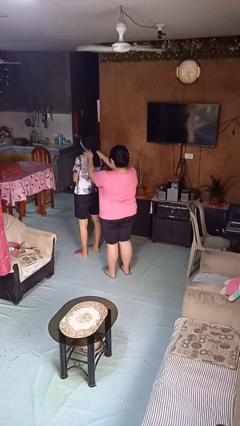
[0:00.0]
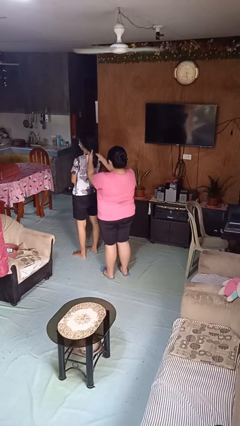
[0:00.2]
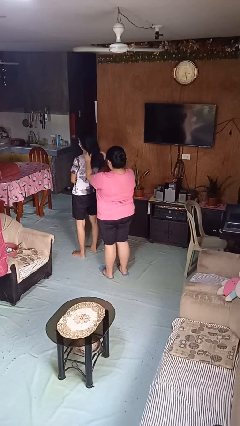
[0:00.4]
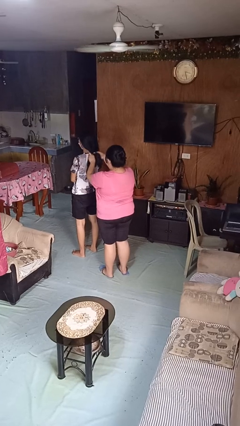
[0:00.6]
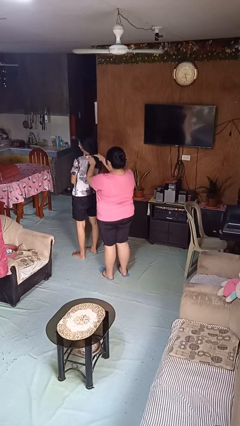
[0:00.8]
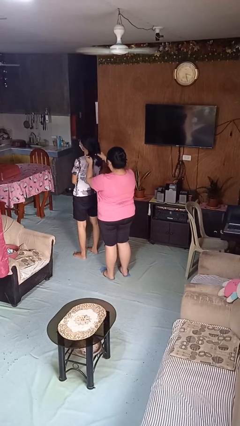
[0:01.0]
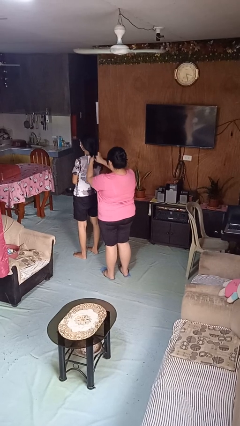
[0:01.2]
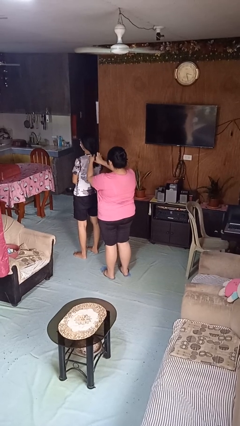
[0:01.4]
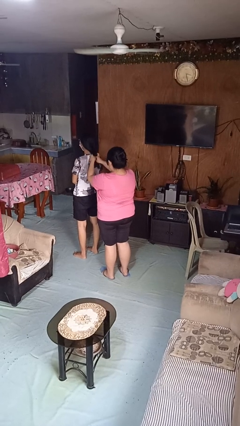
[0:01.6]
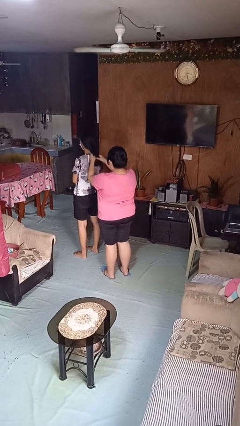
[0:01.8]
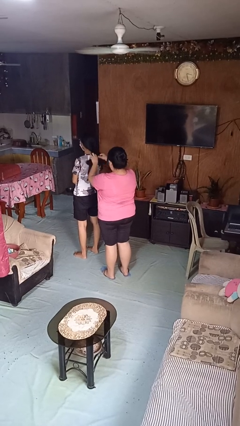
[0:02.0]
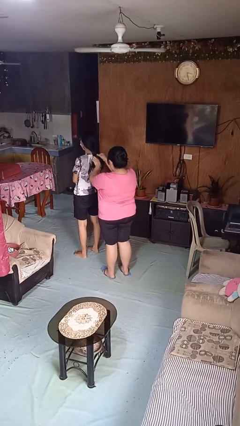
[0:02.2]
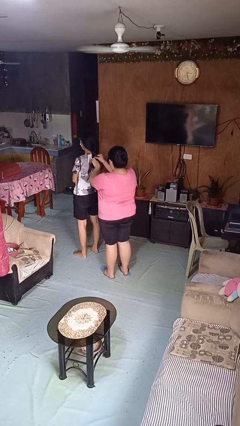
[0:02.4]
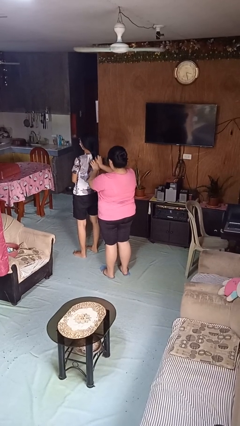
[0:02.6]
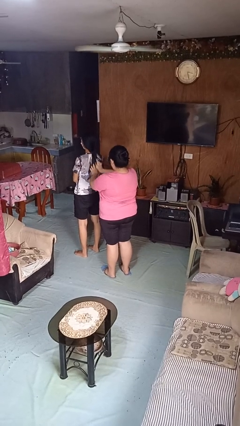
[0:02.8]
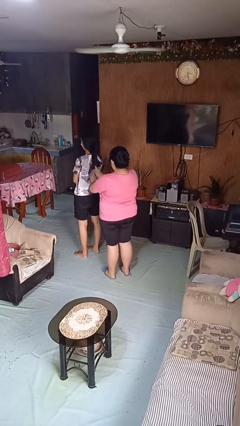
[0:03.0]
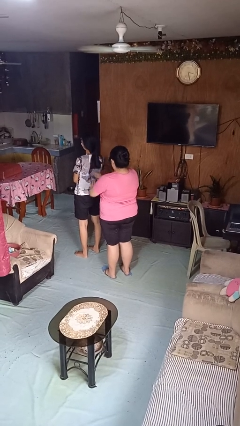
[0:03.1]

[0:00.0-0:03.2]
person braids hair of person

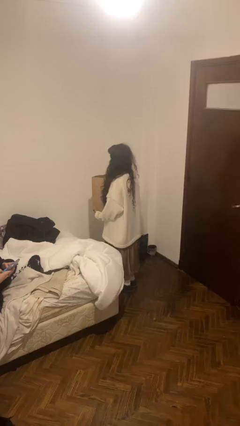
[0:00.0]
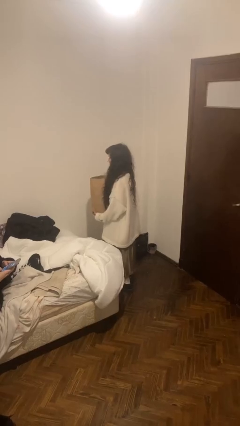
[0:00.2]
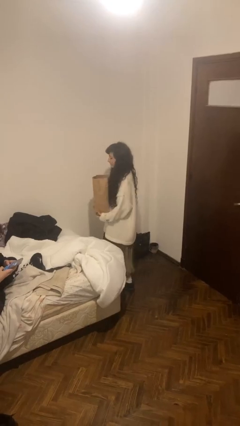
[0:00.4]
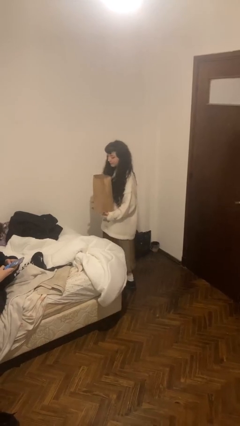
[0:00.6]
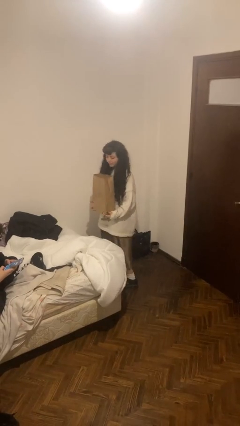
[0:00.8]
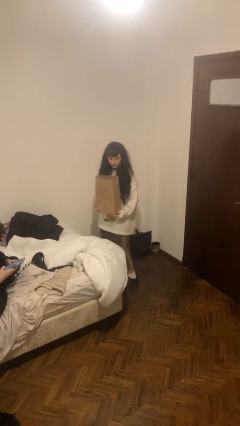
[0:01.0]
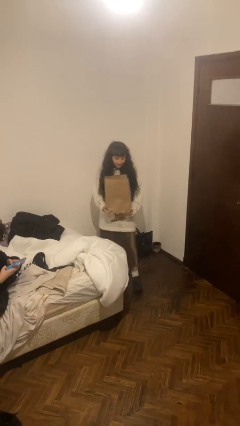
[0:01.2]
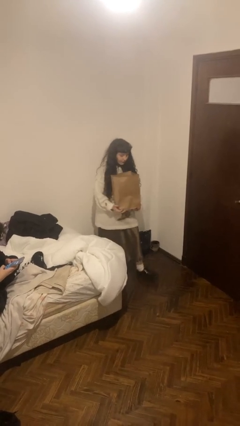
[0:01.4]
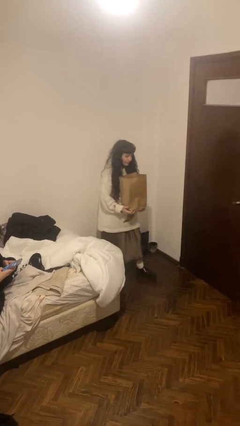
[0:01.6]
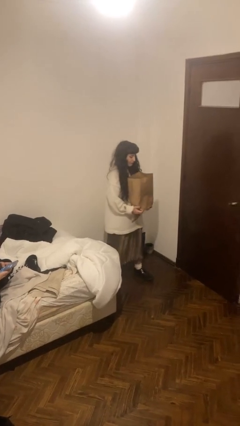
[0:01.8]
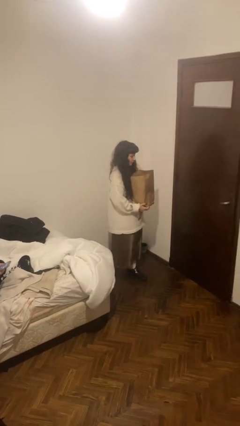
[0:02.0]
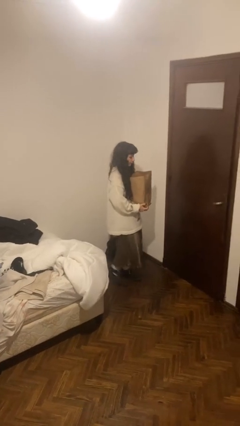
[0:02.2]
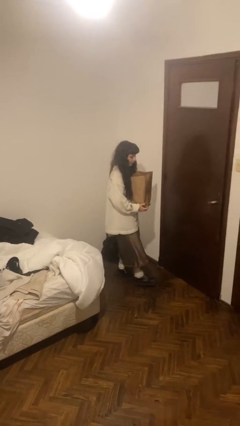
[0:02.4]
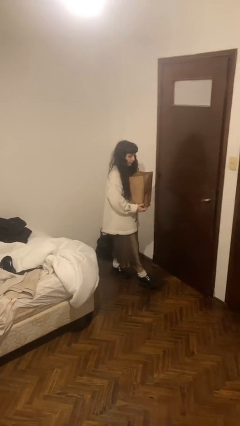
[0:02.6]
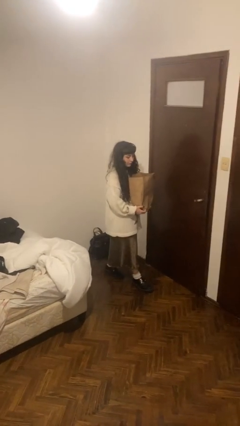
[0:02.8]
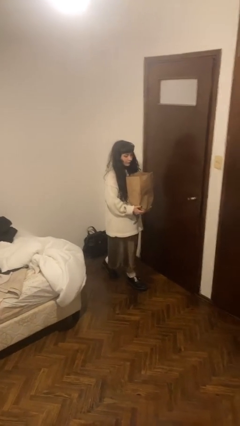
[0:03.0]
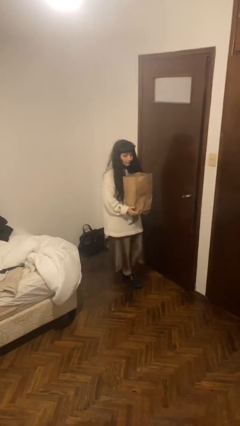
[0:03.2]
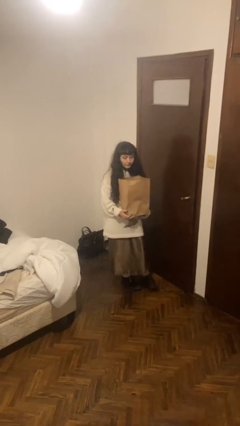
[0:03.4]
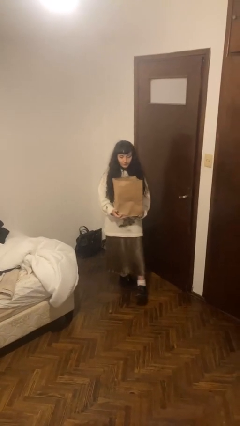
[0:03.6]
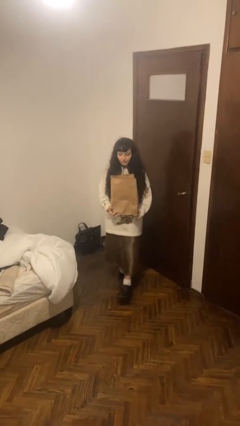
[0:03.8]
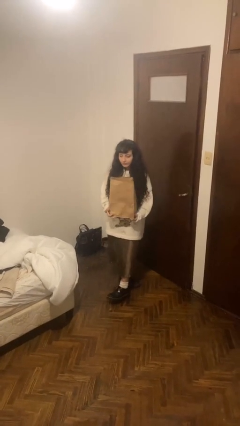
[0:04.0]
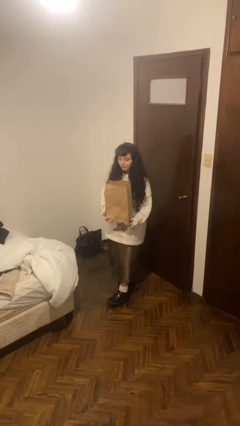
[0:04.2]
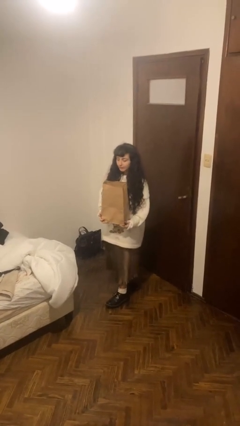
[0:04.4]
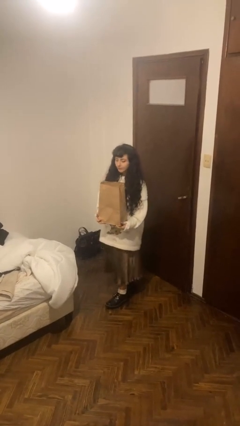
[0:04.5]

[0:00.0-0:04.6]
person carries groceries

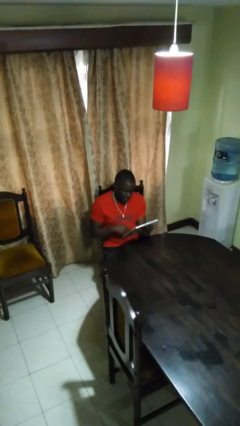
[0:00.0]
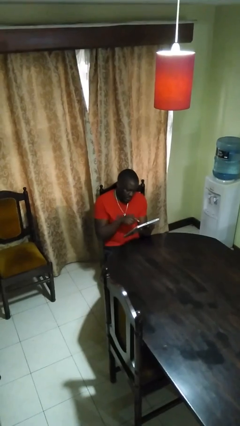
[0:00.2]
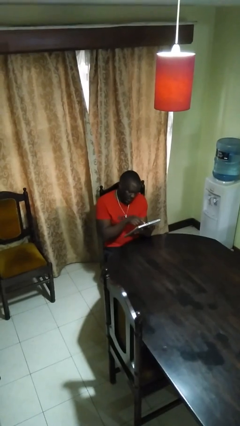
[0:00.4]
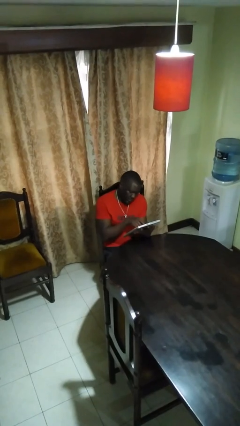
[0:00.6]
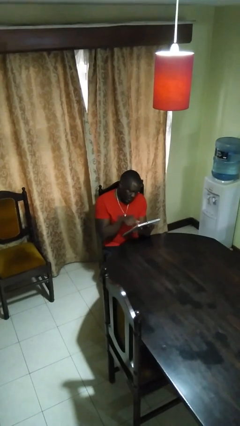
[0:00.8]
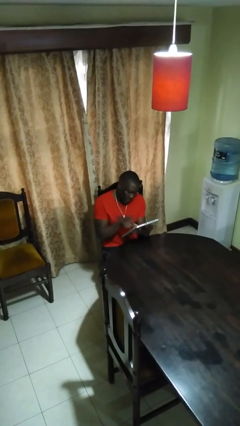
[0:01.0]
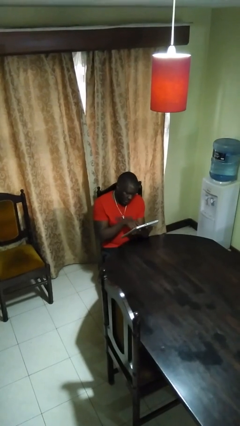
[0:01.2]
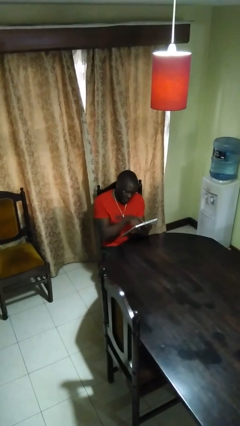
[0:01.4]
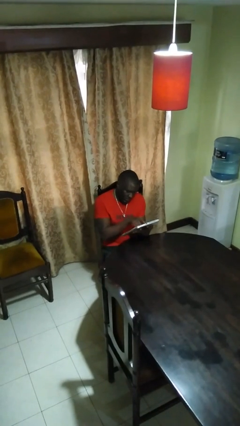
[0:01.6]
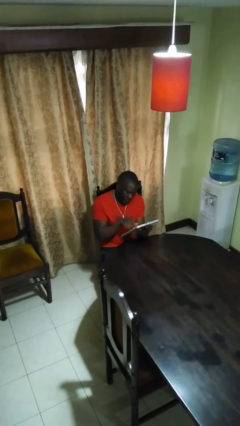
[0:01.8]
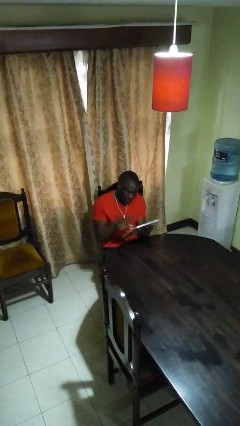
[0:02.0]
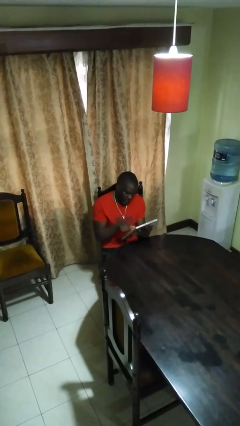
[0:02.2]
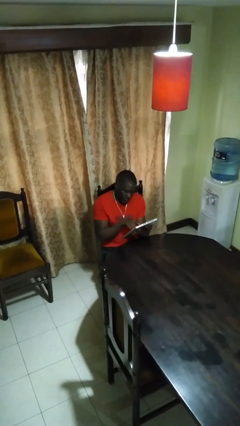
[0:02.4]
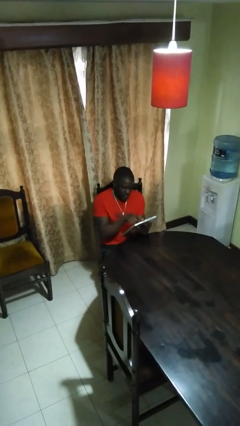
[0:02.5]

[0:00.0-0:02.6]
person interacts with tablet

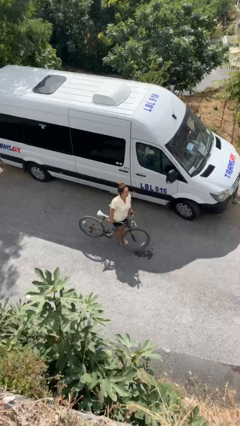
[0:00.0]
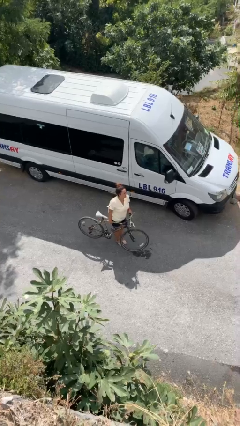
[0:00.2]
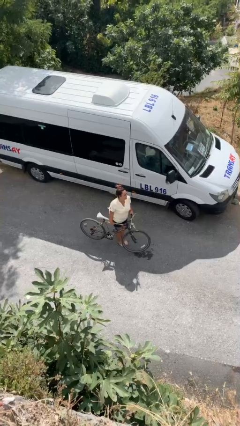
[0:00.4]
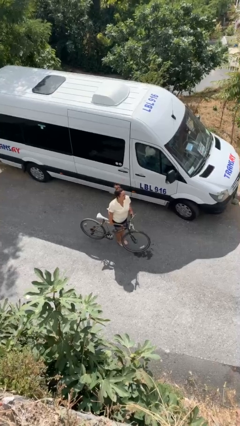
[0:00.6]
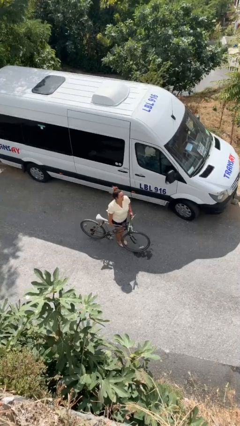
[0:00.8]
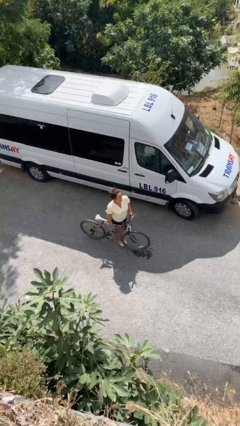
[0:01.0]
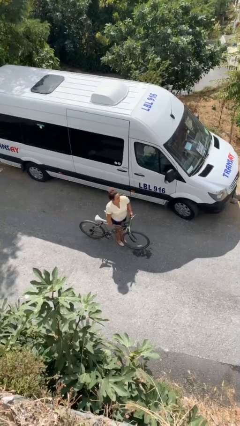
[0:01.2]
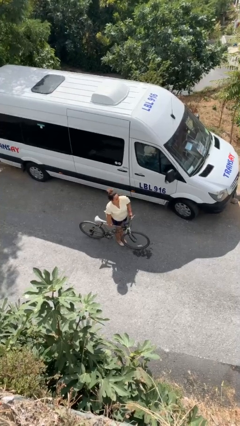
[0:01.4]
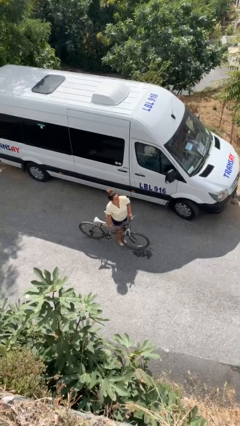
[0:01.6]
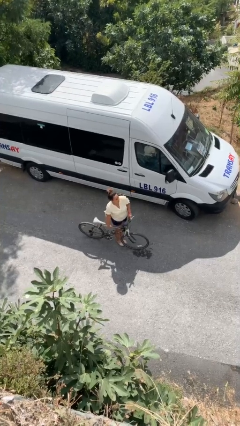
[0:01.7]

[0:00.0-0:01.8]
person puts down object on floor

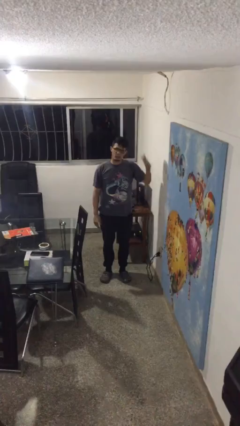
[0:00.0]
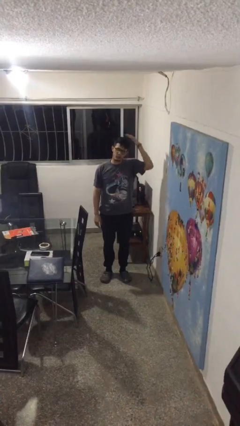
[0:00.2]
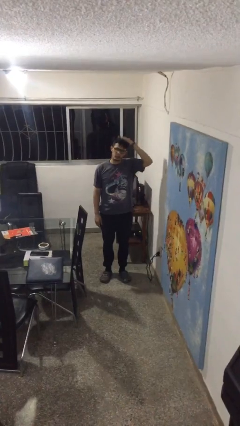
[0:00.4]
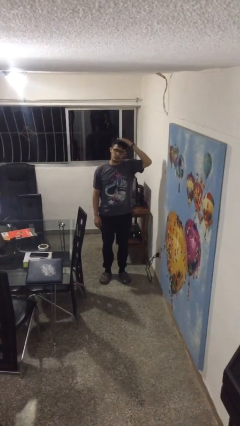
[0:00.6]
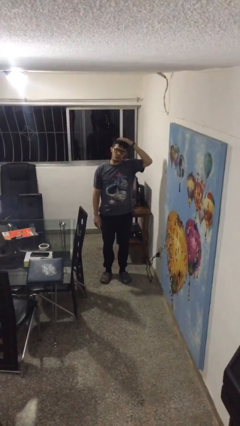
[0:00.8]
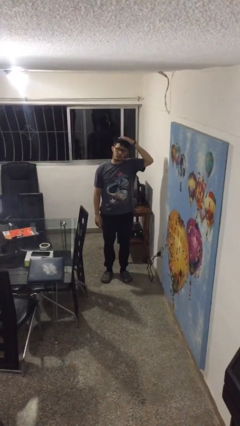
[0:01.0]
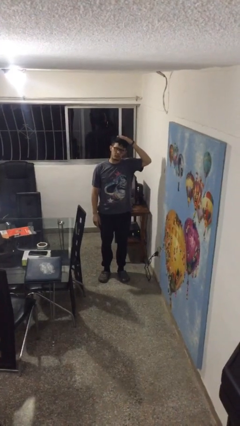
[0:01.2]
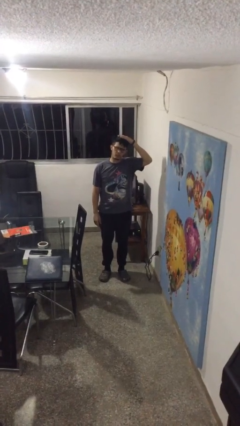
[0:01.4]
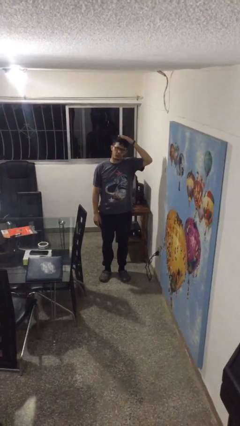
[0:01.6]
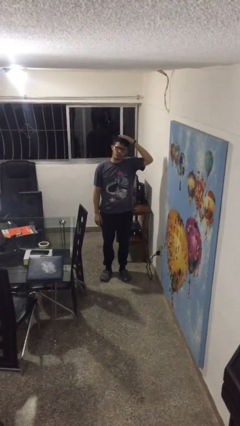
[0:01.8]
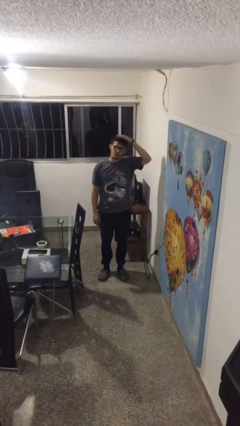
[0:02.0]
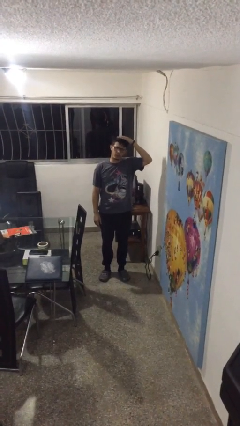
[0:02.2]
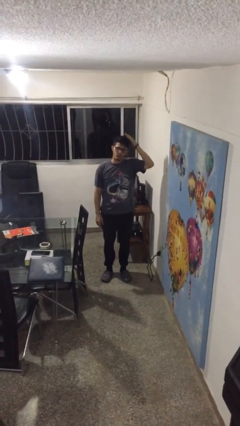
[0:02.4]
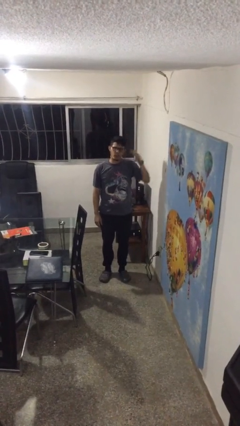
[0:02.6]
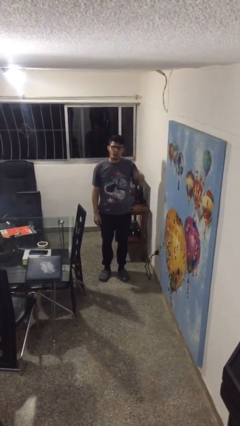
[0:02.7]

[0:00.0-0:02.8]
person pats head

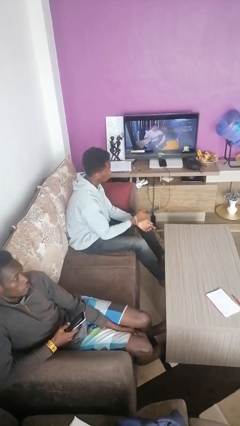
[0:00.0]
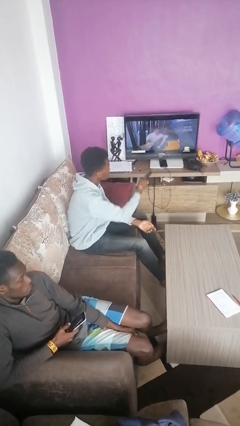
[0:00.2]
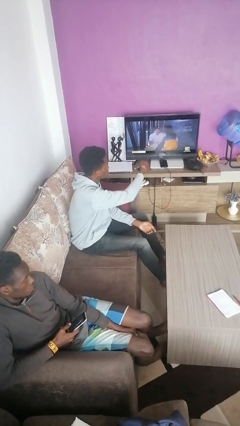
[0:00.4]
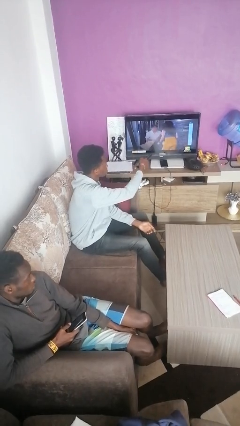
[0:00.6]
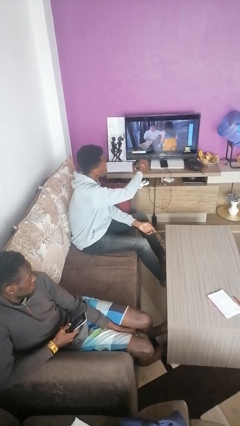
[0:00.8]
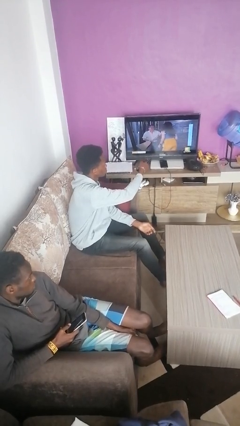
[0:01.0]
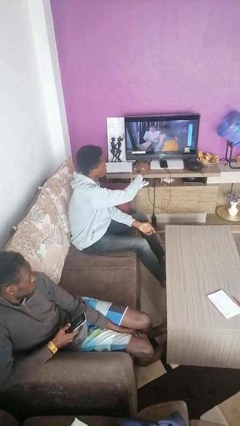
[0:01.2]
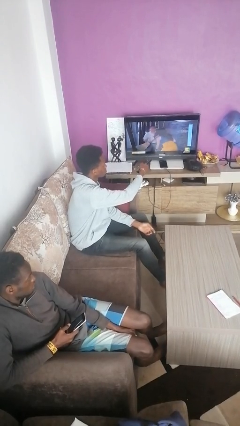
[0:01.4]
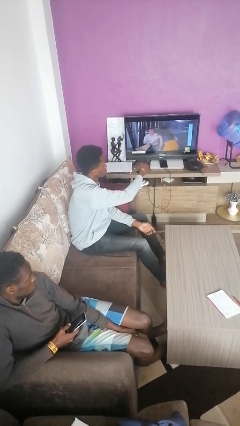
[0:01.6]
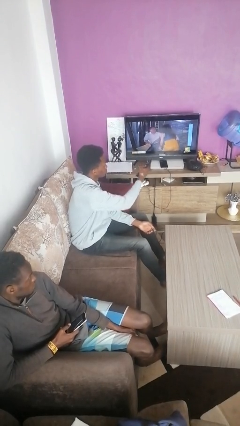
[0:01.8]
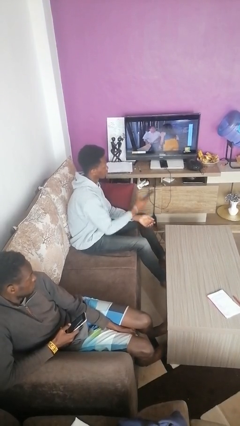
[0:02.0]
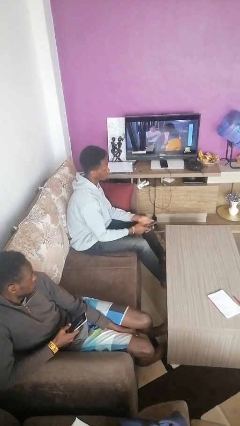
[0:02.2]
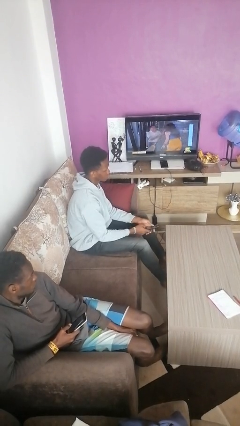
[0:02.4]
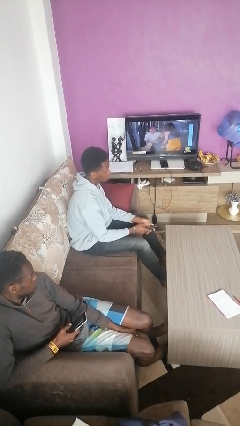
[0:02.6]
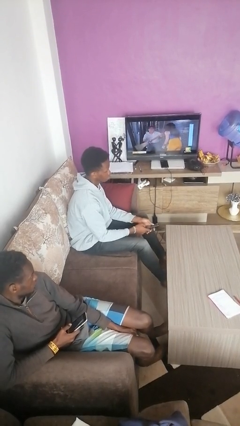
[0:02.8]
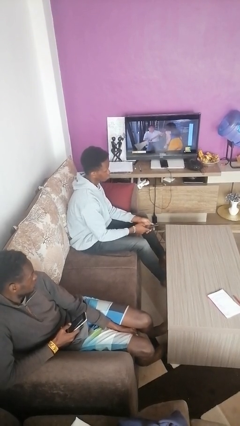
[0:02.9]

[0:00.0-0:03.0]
person uses television remote
